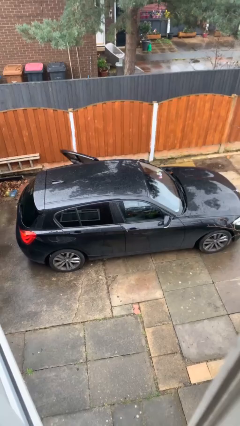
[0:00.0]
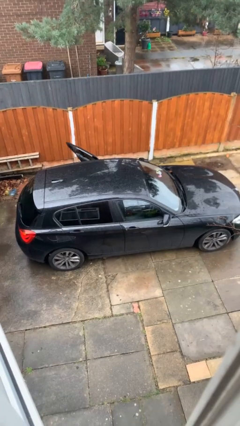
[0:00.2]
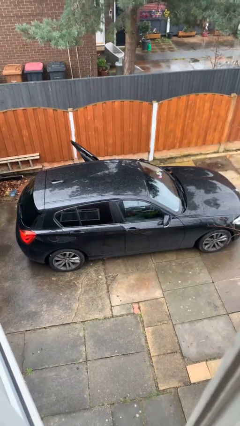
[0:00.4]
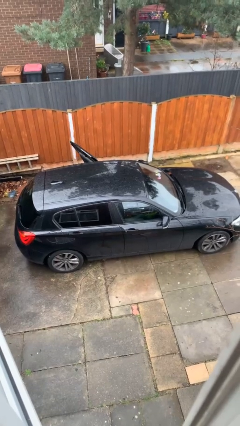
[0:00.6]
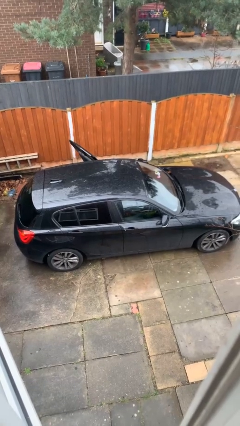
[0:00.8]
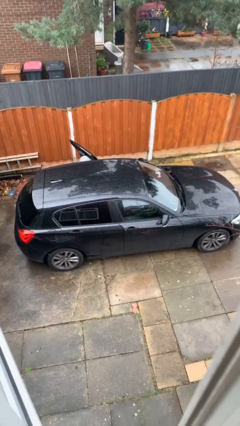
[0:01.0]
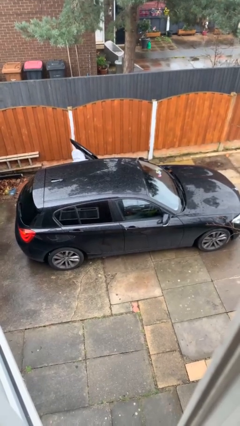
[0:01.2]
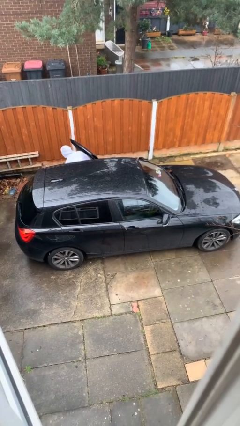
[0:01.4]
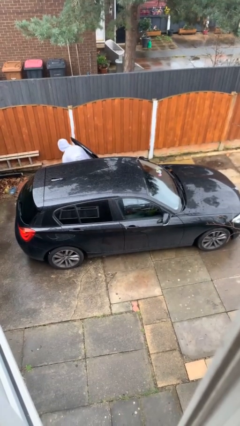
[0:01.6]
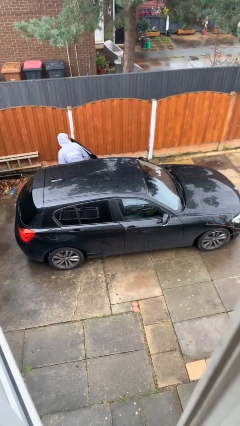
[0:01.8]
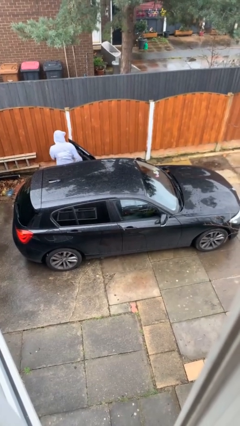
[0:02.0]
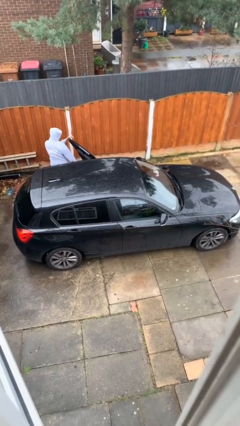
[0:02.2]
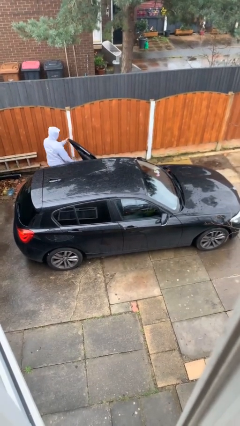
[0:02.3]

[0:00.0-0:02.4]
car drops off person

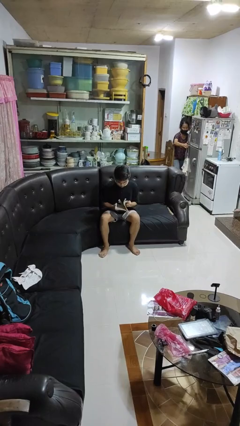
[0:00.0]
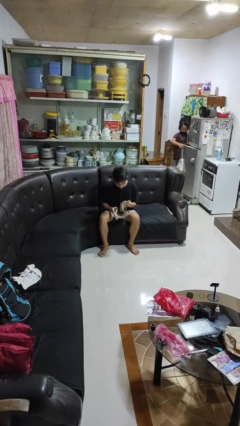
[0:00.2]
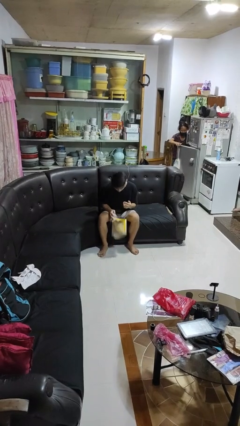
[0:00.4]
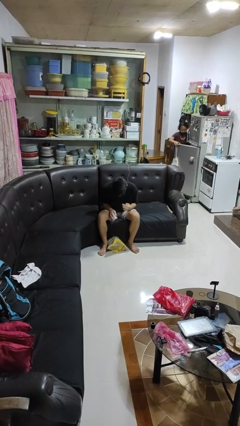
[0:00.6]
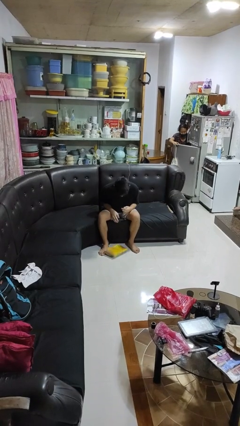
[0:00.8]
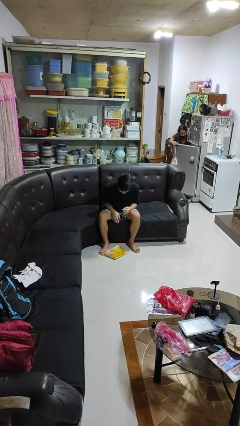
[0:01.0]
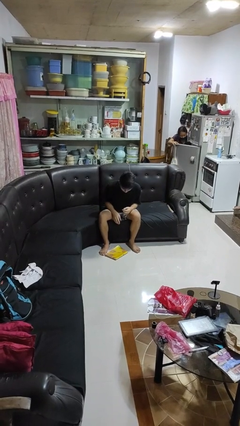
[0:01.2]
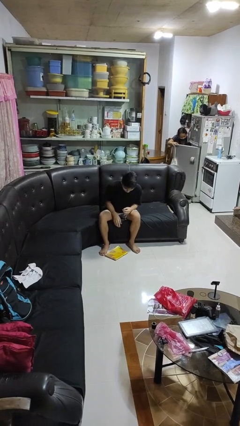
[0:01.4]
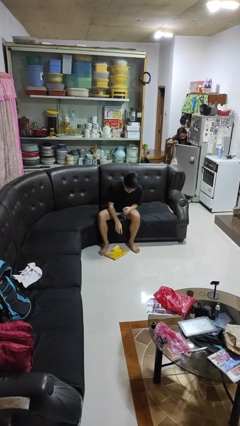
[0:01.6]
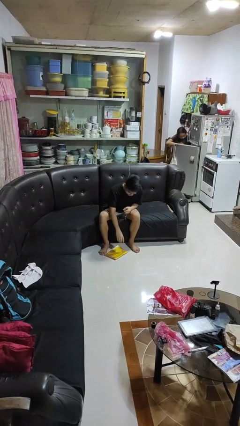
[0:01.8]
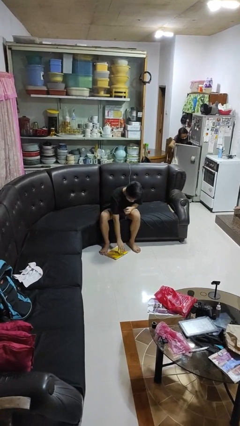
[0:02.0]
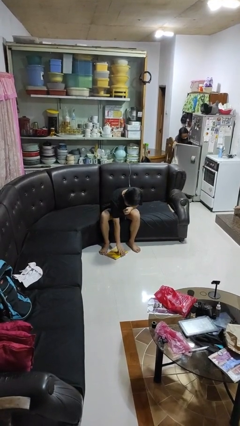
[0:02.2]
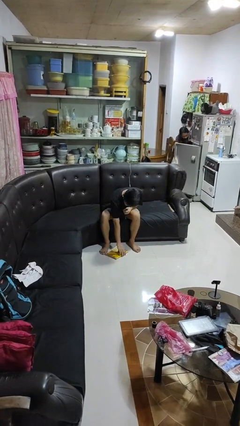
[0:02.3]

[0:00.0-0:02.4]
person drops object

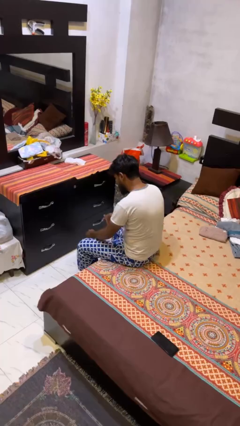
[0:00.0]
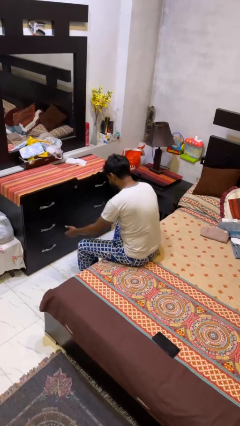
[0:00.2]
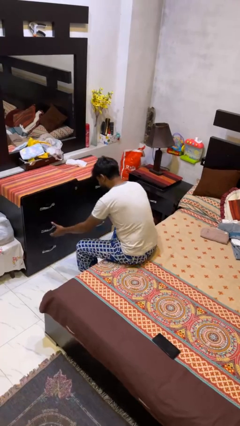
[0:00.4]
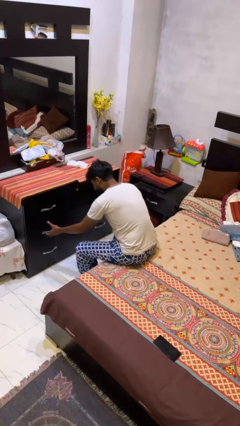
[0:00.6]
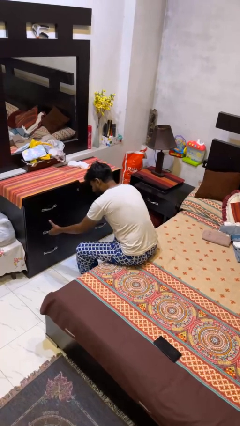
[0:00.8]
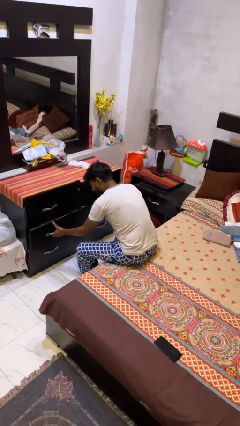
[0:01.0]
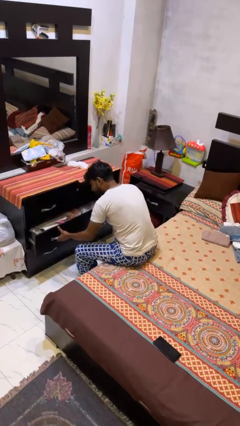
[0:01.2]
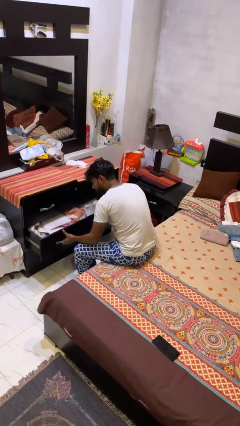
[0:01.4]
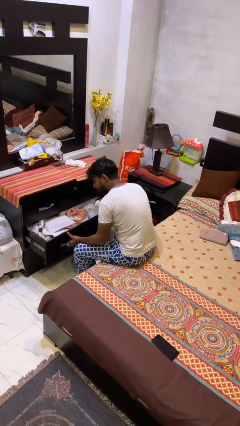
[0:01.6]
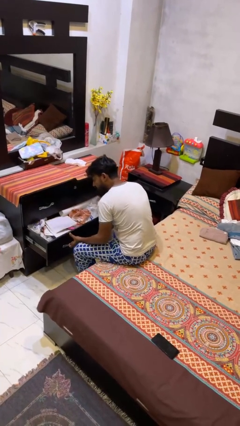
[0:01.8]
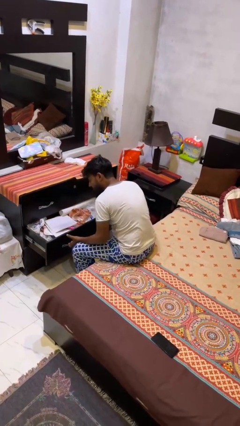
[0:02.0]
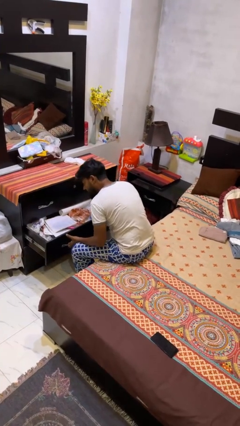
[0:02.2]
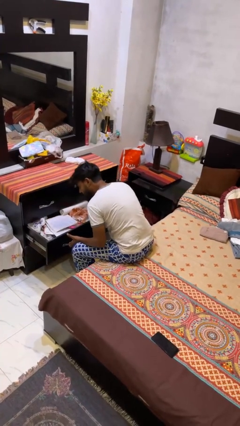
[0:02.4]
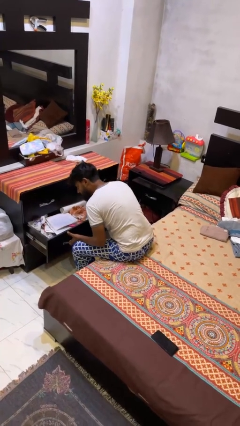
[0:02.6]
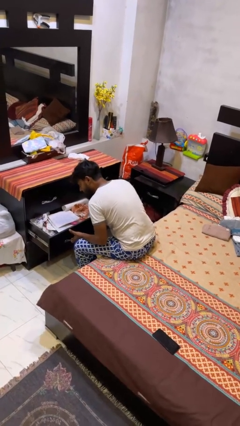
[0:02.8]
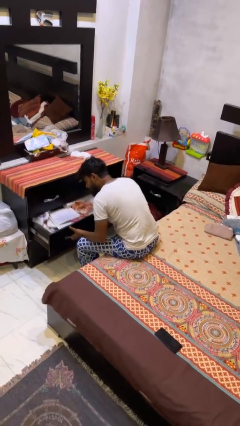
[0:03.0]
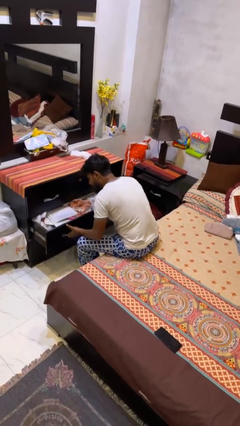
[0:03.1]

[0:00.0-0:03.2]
person opens dresser drawer

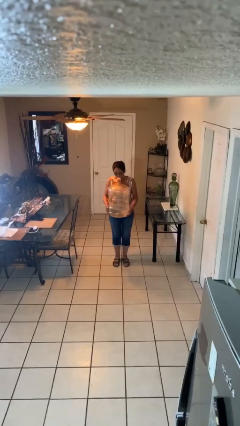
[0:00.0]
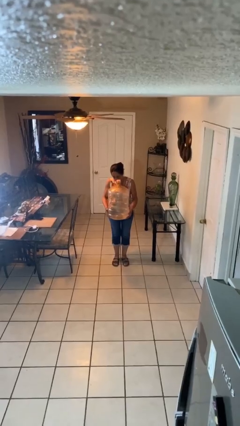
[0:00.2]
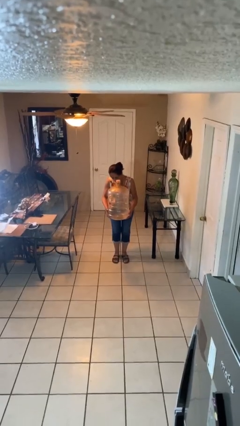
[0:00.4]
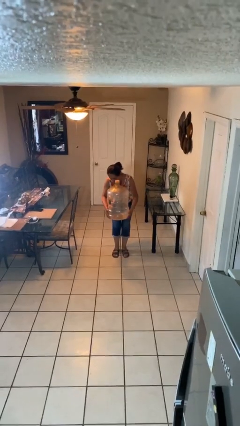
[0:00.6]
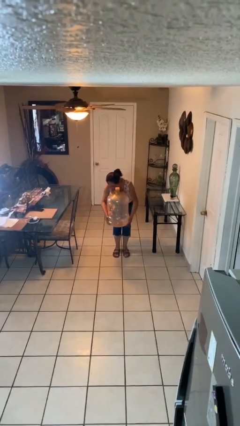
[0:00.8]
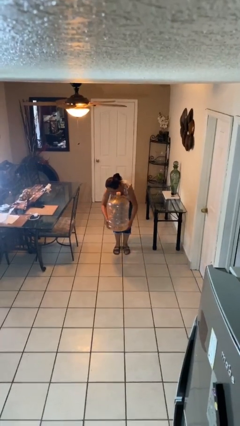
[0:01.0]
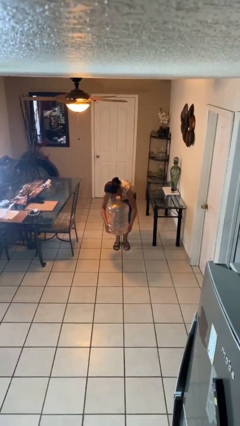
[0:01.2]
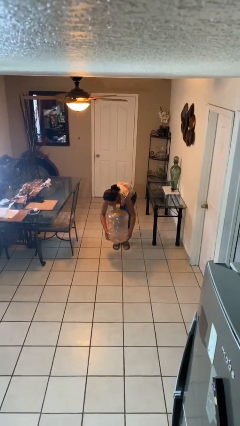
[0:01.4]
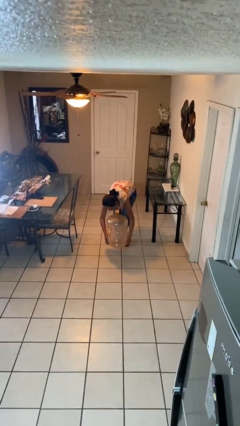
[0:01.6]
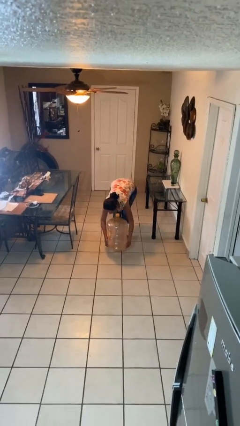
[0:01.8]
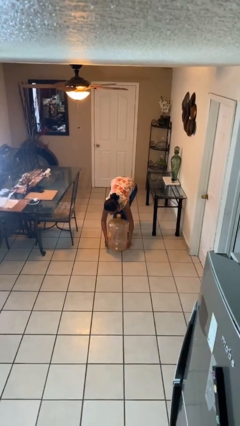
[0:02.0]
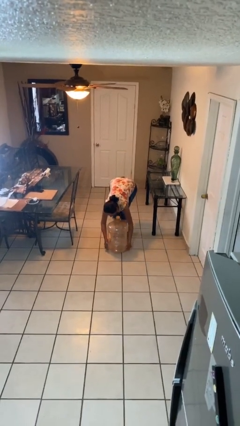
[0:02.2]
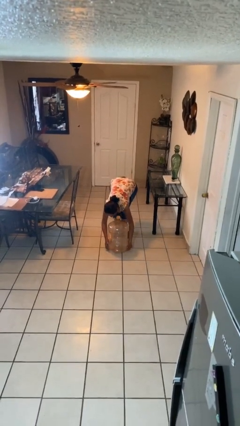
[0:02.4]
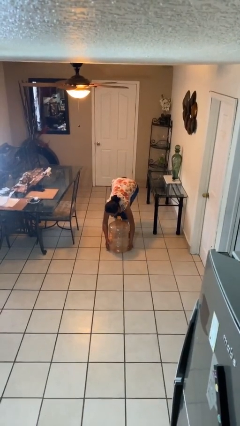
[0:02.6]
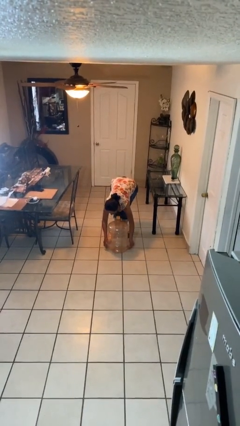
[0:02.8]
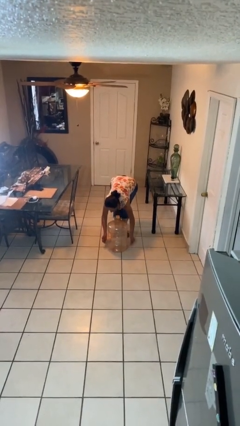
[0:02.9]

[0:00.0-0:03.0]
person puts down object on floor

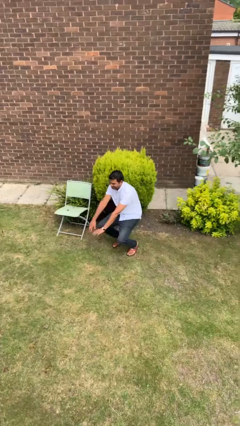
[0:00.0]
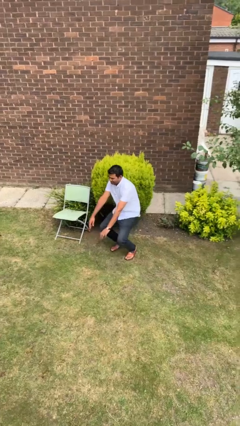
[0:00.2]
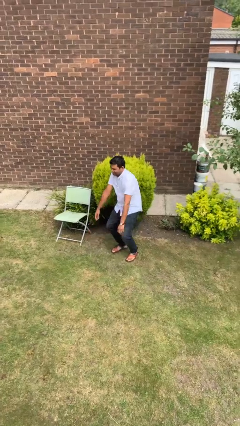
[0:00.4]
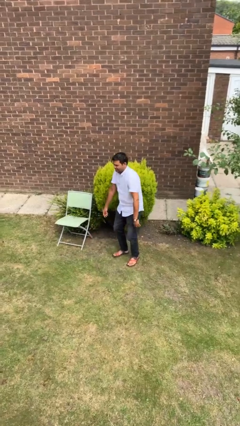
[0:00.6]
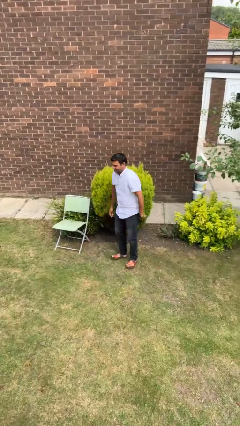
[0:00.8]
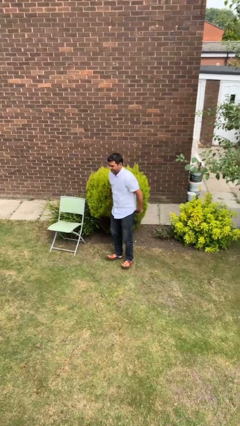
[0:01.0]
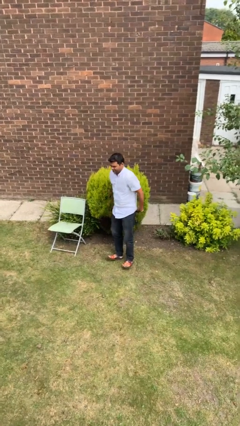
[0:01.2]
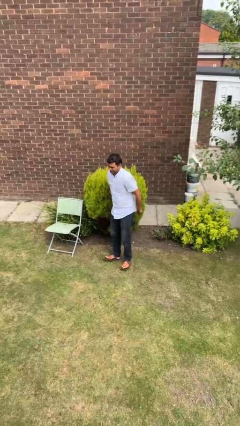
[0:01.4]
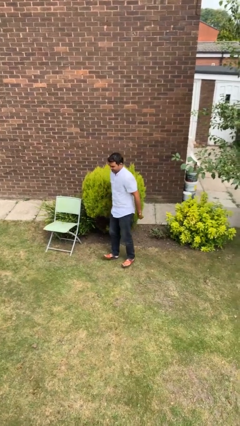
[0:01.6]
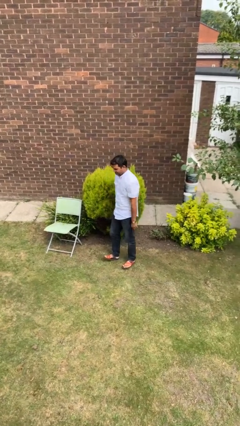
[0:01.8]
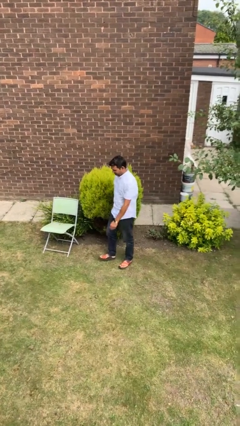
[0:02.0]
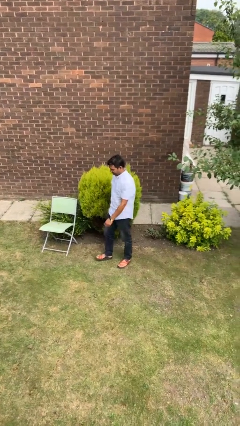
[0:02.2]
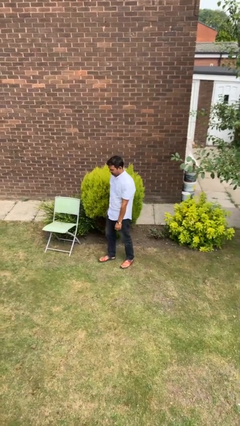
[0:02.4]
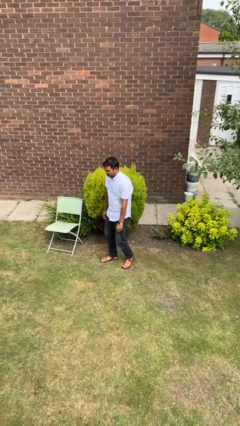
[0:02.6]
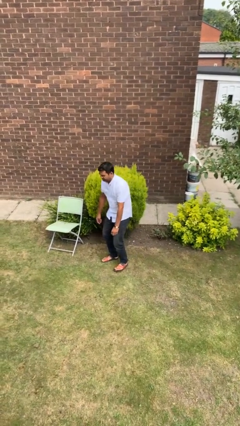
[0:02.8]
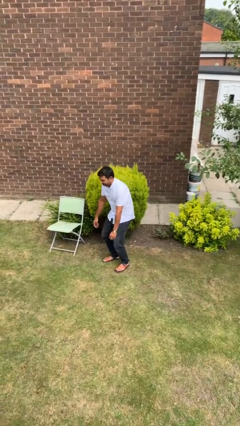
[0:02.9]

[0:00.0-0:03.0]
person stands up

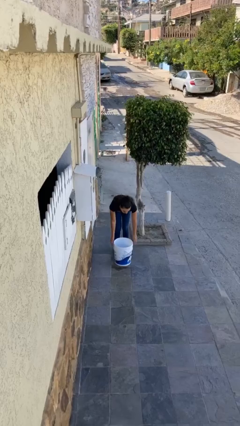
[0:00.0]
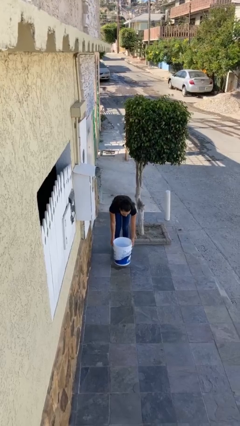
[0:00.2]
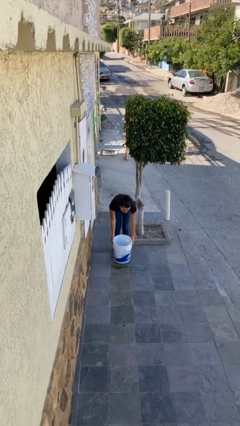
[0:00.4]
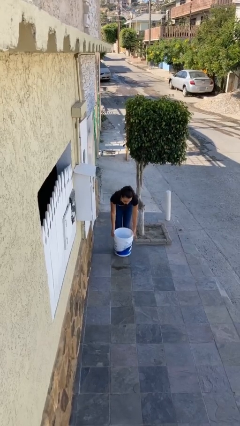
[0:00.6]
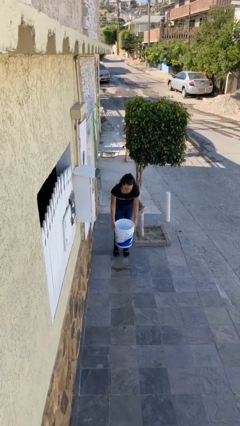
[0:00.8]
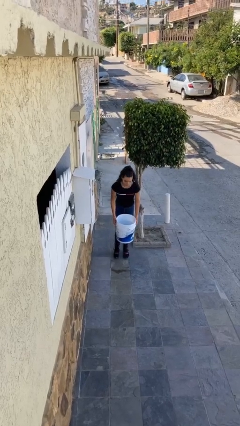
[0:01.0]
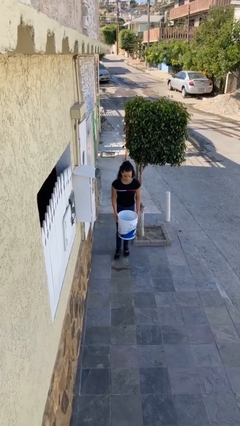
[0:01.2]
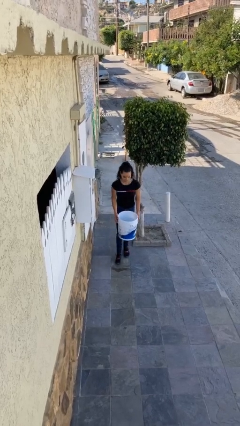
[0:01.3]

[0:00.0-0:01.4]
person picks up object from floor

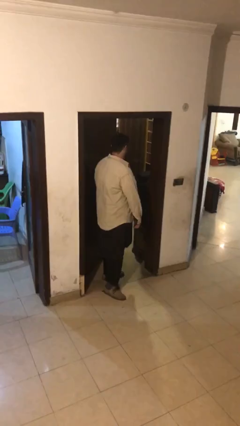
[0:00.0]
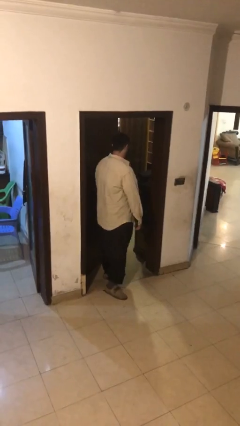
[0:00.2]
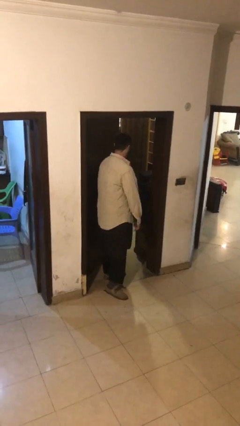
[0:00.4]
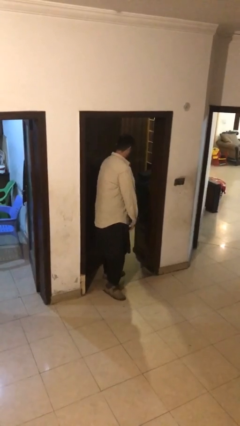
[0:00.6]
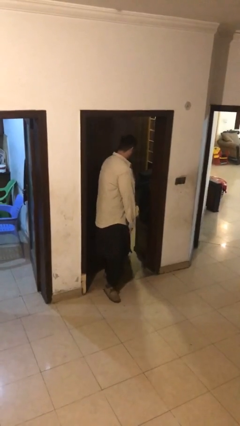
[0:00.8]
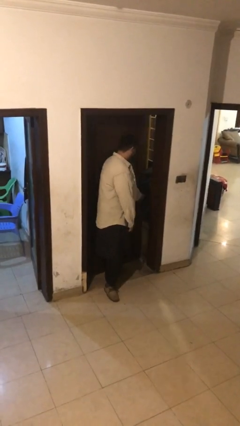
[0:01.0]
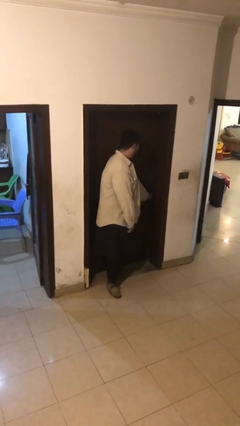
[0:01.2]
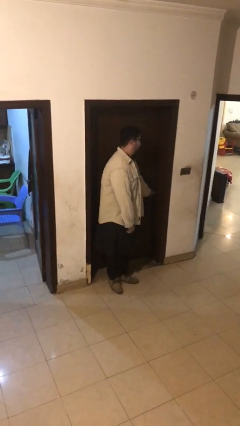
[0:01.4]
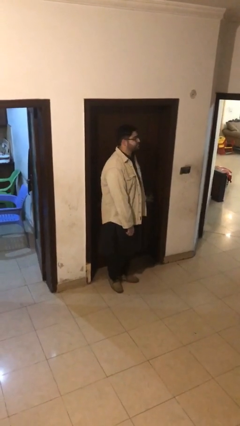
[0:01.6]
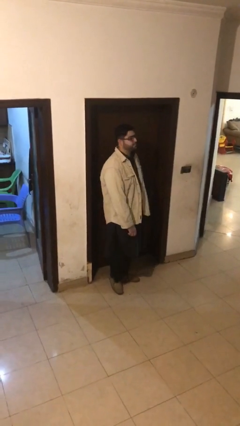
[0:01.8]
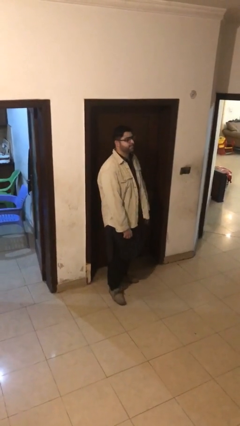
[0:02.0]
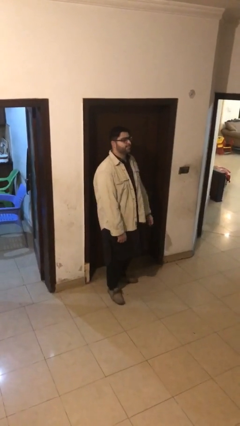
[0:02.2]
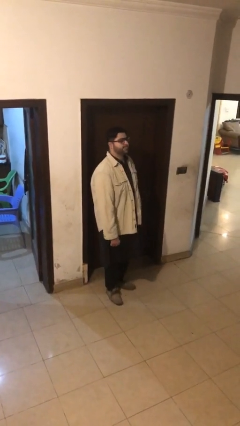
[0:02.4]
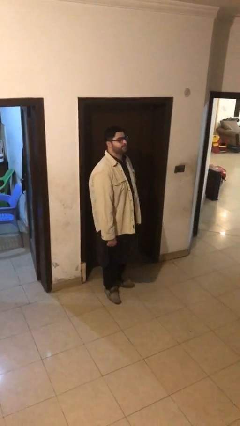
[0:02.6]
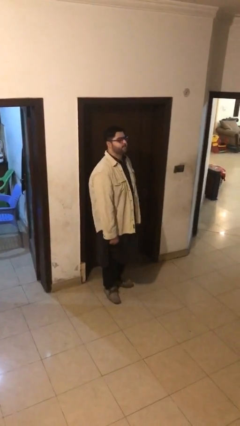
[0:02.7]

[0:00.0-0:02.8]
person closes facility door
